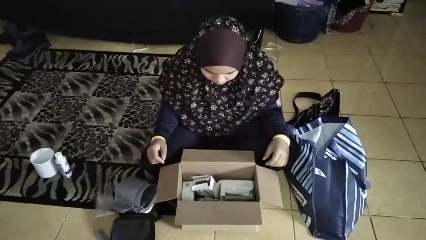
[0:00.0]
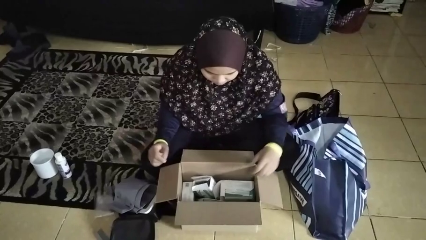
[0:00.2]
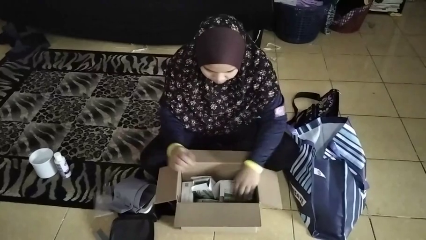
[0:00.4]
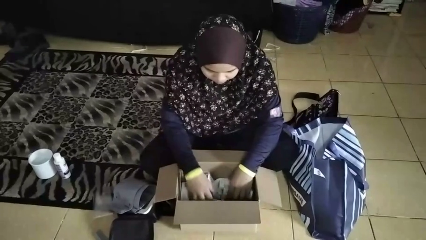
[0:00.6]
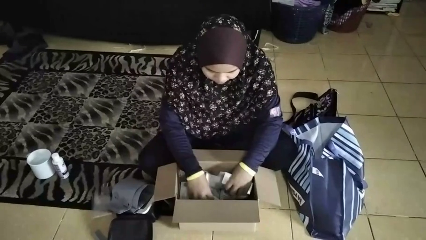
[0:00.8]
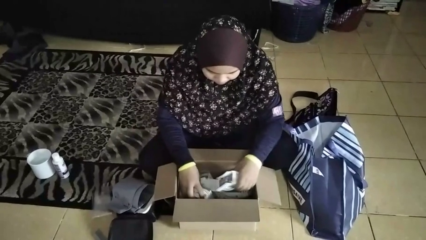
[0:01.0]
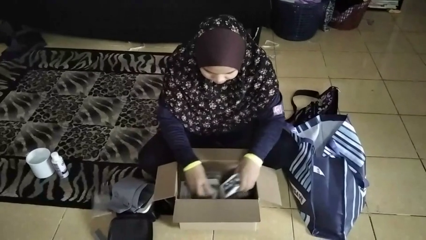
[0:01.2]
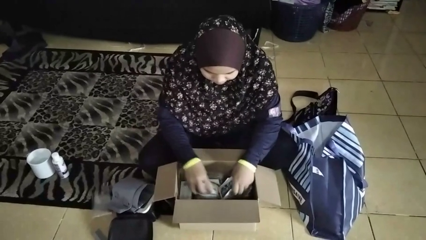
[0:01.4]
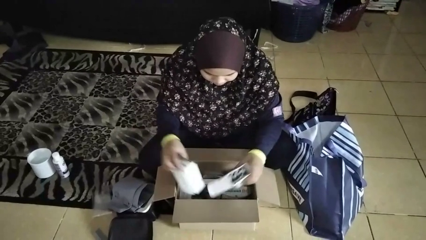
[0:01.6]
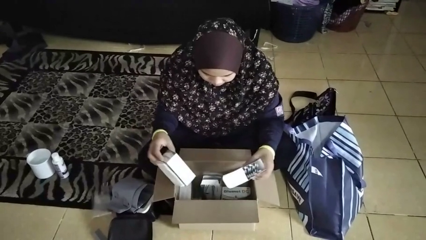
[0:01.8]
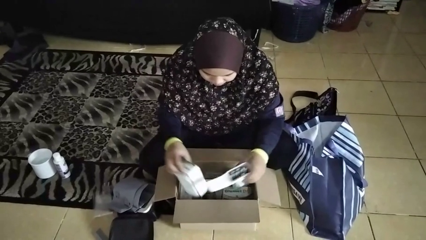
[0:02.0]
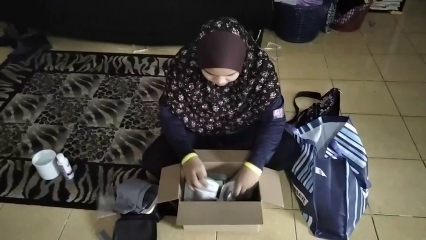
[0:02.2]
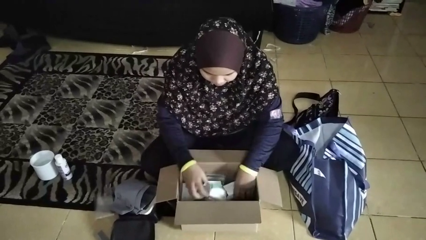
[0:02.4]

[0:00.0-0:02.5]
person searches in box

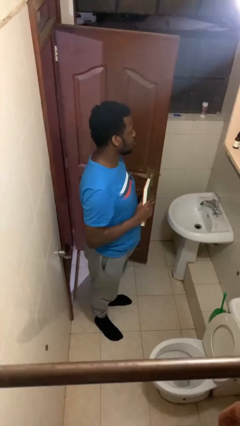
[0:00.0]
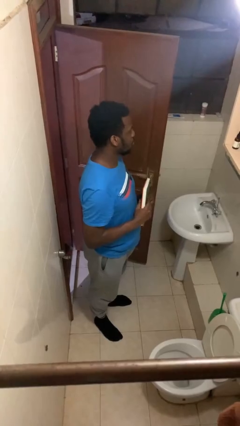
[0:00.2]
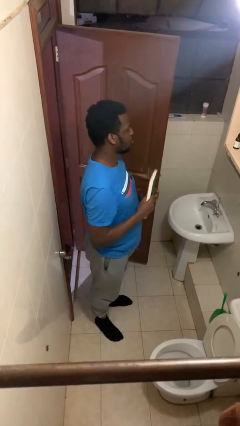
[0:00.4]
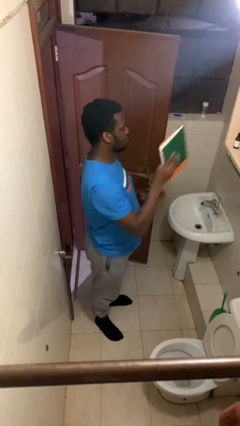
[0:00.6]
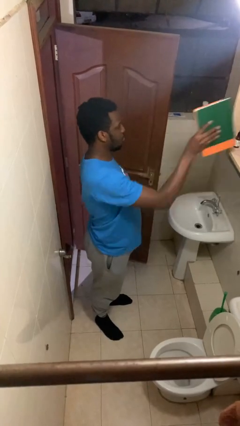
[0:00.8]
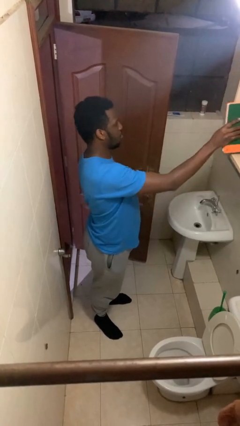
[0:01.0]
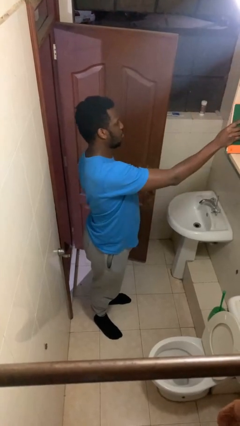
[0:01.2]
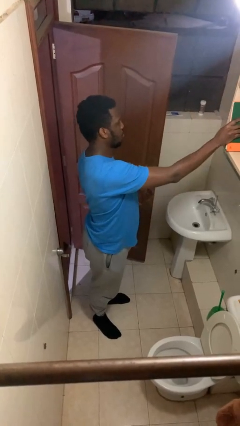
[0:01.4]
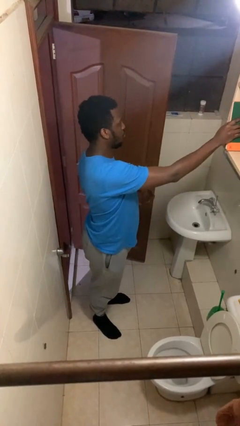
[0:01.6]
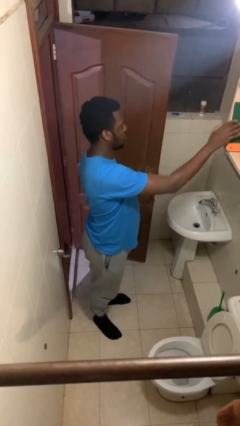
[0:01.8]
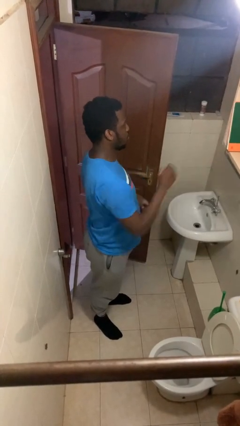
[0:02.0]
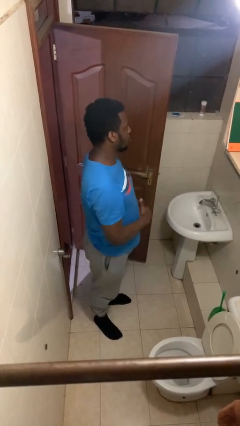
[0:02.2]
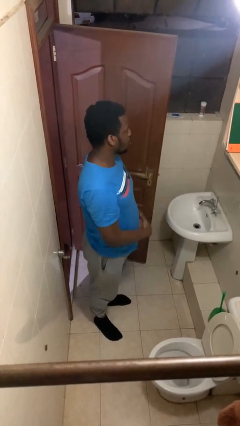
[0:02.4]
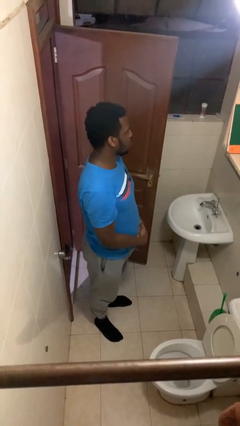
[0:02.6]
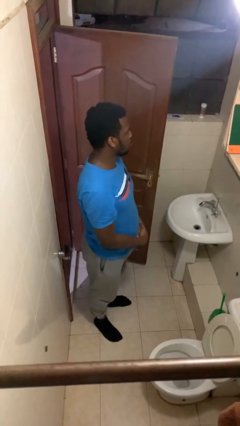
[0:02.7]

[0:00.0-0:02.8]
person puts down object into cabinet

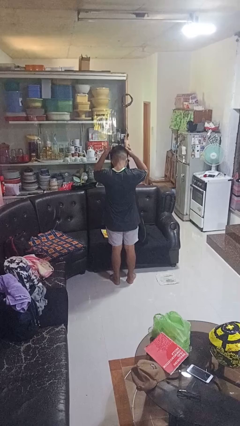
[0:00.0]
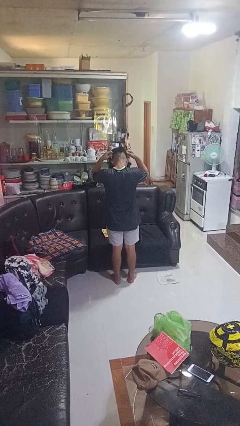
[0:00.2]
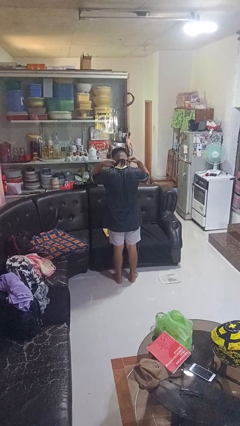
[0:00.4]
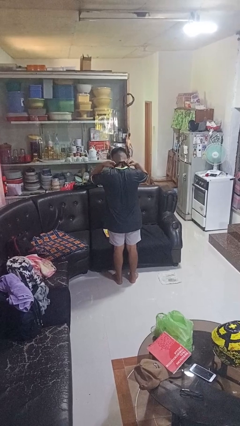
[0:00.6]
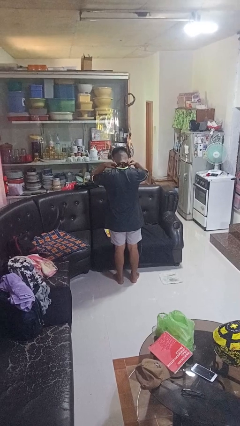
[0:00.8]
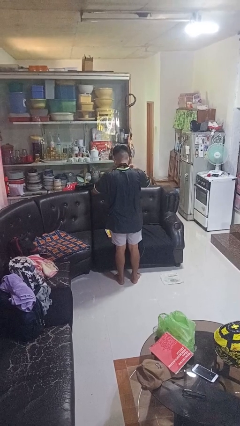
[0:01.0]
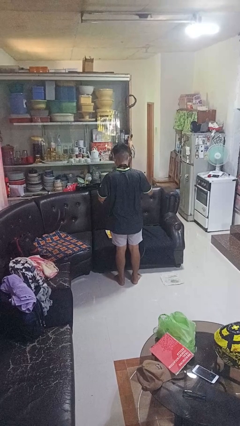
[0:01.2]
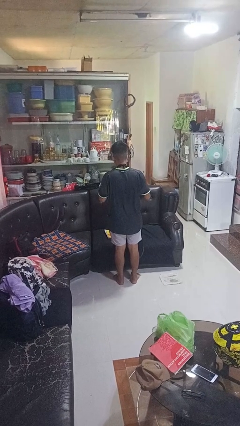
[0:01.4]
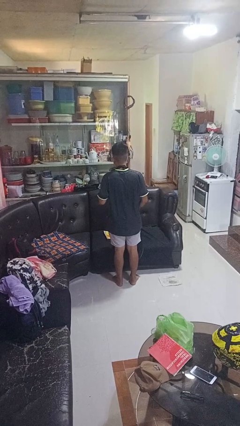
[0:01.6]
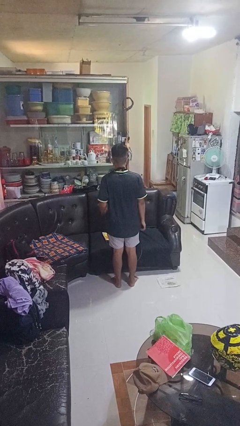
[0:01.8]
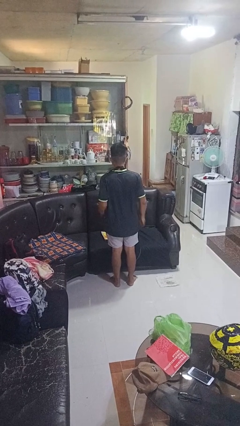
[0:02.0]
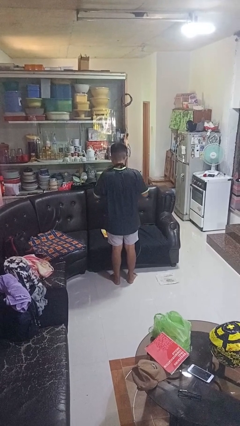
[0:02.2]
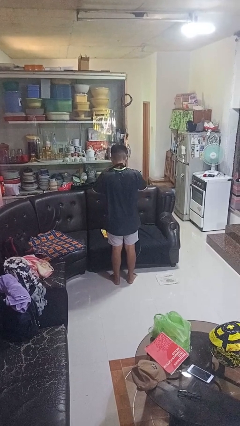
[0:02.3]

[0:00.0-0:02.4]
person puts on apron

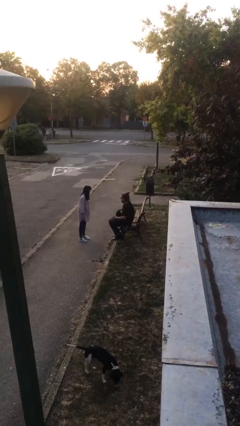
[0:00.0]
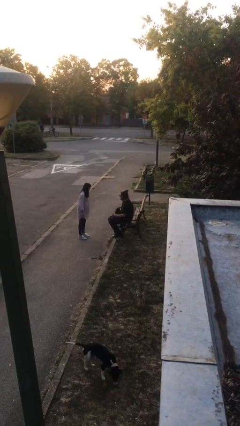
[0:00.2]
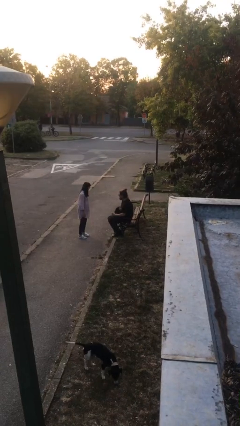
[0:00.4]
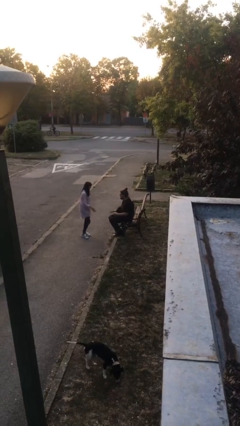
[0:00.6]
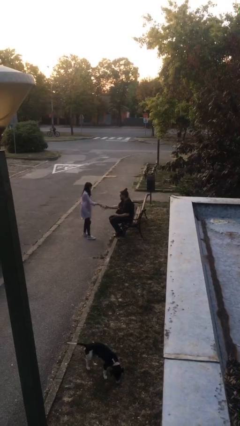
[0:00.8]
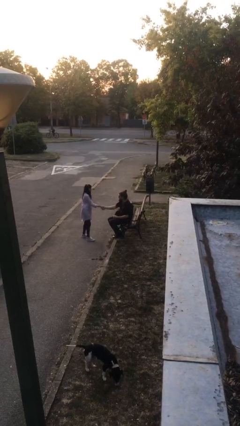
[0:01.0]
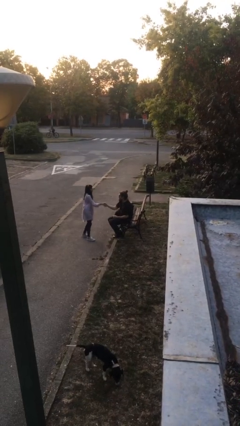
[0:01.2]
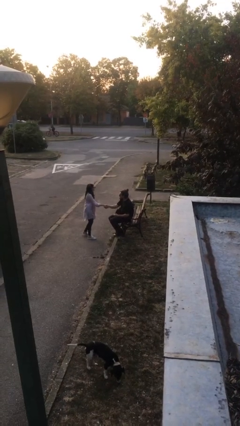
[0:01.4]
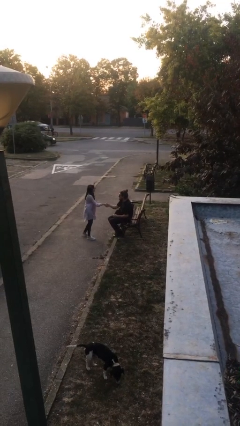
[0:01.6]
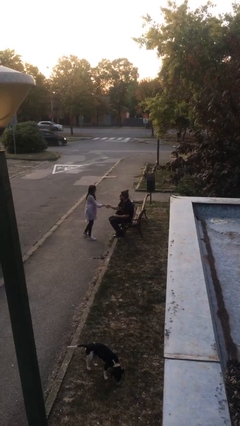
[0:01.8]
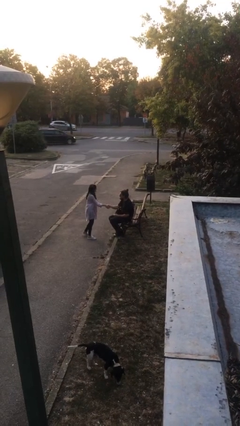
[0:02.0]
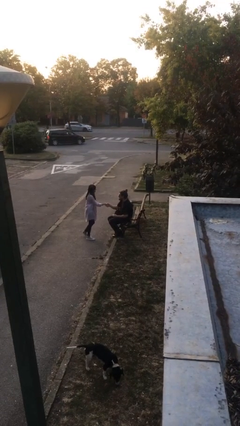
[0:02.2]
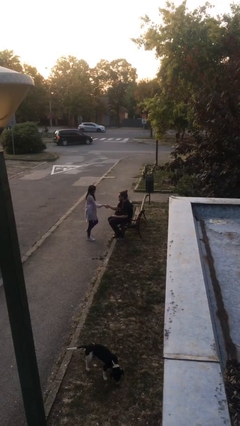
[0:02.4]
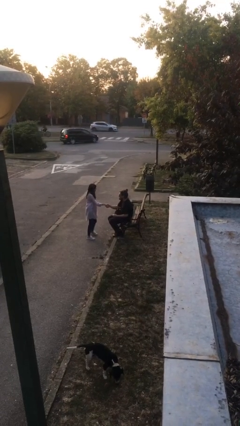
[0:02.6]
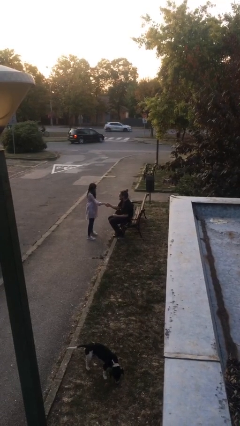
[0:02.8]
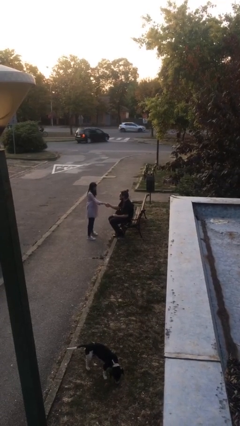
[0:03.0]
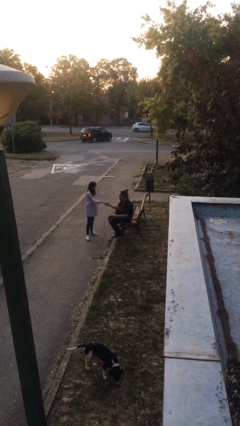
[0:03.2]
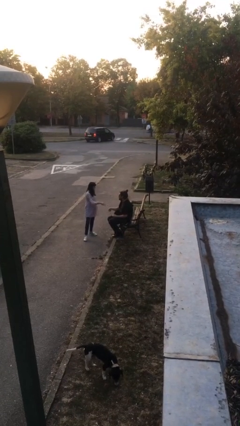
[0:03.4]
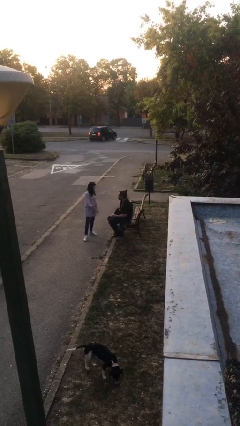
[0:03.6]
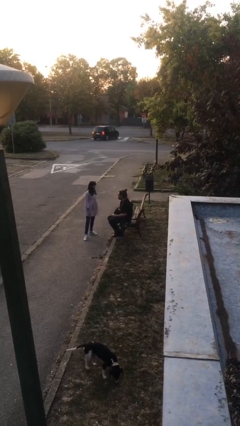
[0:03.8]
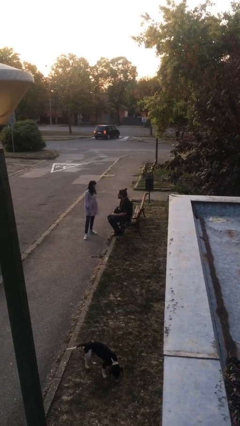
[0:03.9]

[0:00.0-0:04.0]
person shakes hand

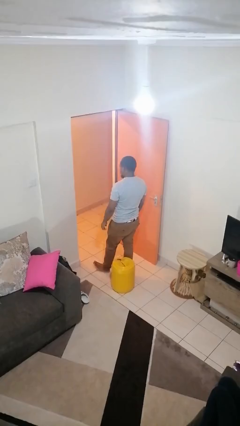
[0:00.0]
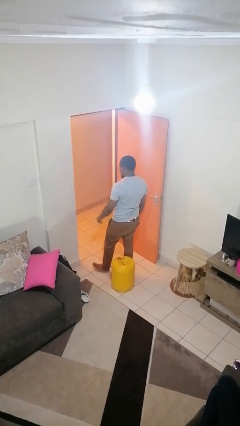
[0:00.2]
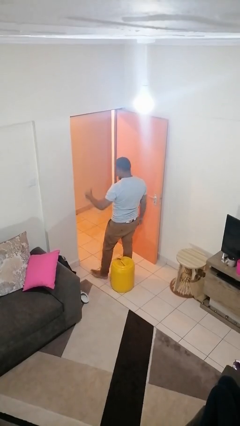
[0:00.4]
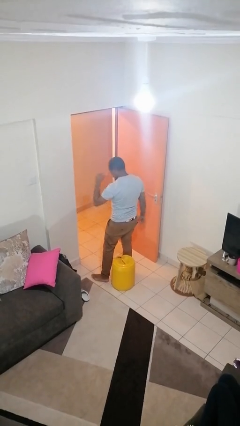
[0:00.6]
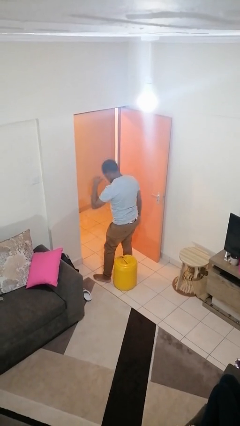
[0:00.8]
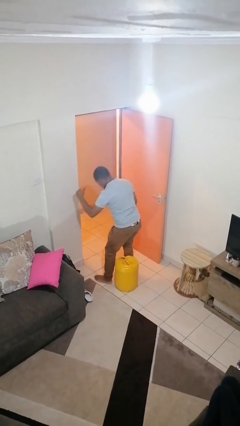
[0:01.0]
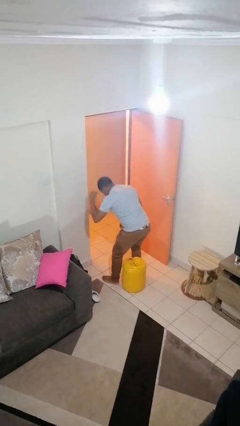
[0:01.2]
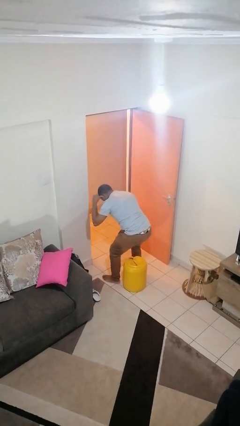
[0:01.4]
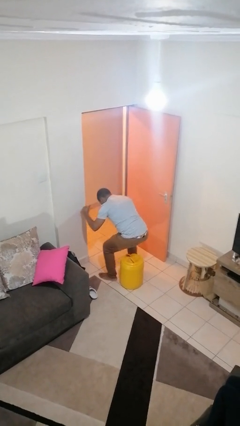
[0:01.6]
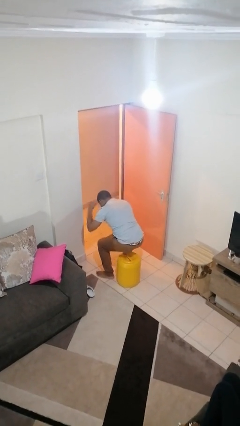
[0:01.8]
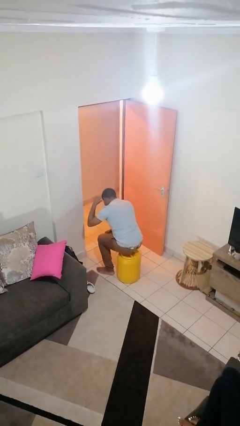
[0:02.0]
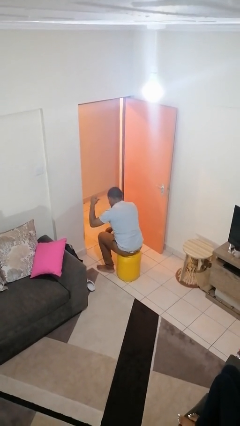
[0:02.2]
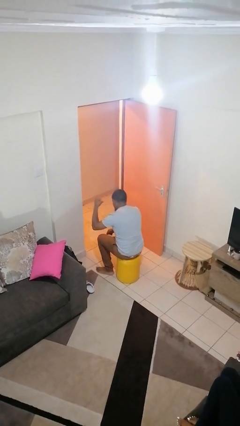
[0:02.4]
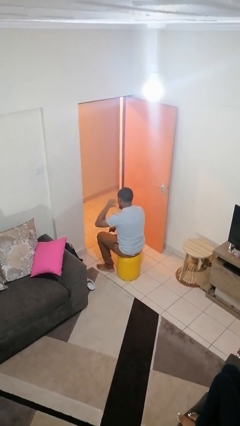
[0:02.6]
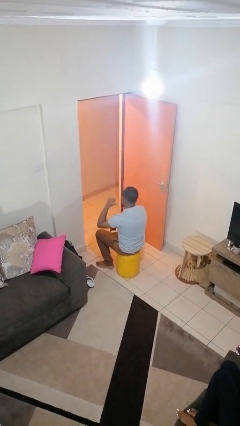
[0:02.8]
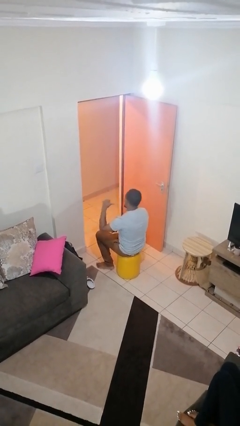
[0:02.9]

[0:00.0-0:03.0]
person gestures behind me

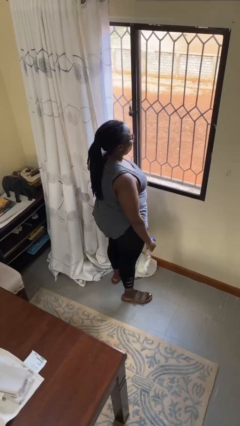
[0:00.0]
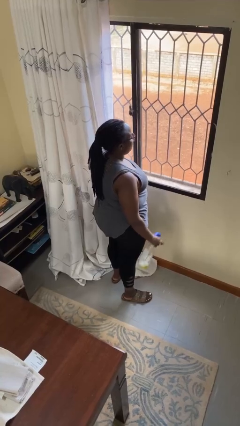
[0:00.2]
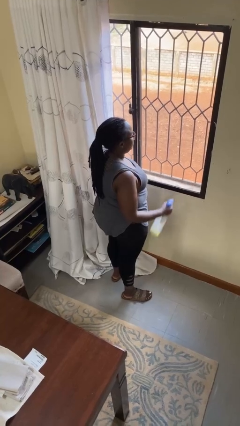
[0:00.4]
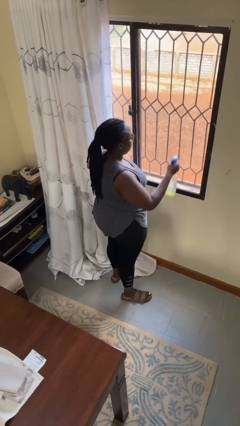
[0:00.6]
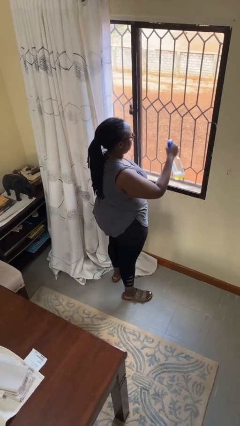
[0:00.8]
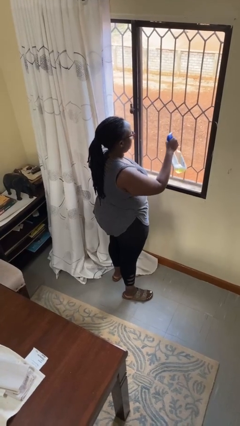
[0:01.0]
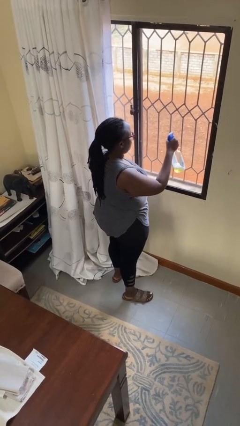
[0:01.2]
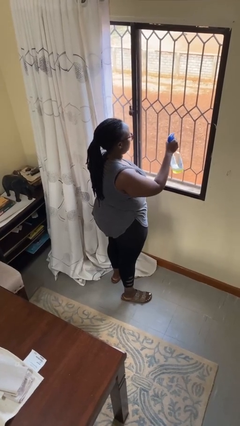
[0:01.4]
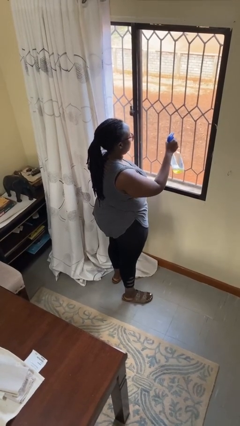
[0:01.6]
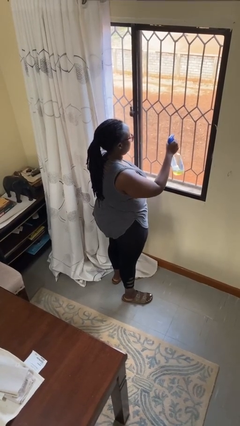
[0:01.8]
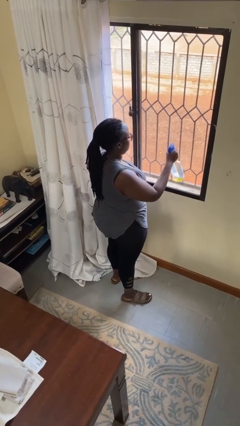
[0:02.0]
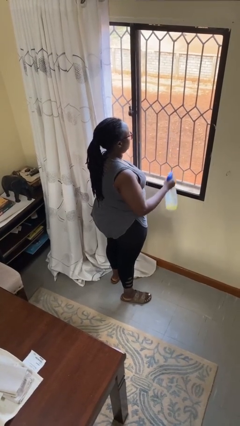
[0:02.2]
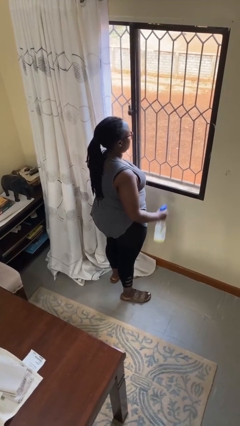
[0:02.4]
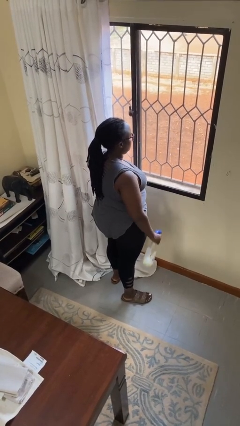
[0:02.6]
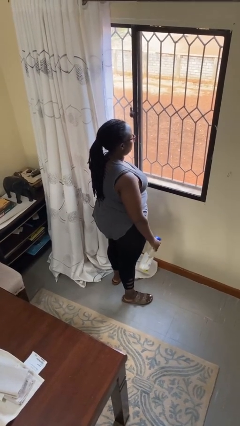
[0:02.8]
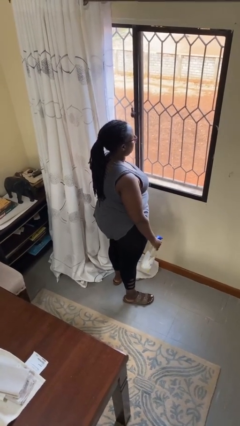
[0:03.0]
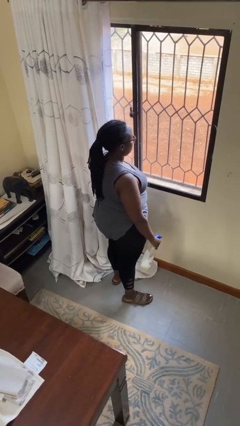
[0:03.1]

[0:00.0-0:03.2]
person sprays from bottle
